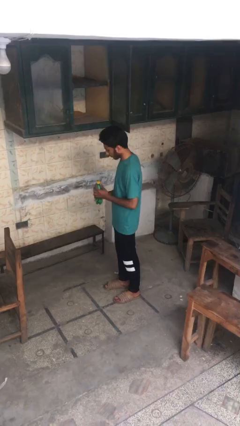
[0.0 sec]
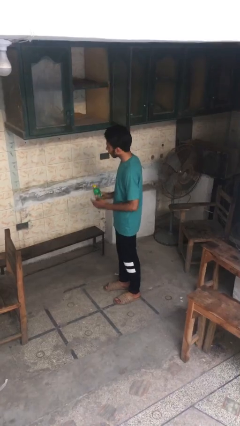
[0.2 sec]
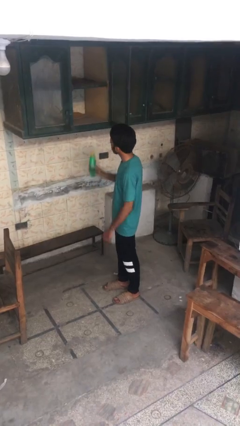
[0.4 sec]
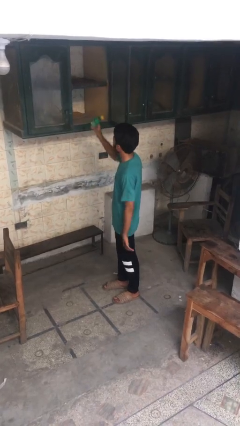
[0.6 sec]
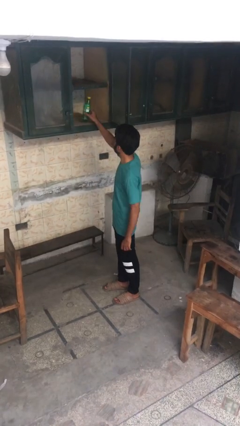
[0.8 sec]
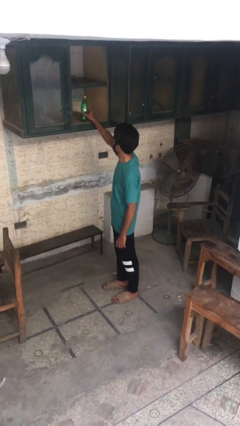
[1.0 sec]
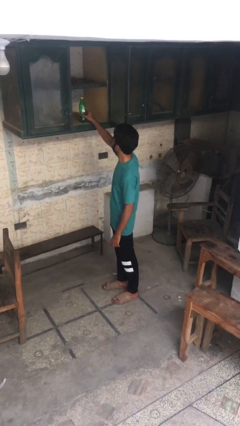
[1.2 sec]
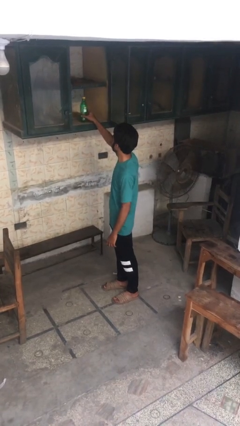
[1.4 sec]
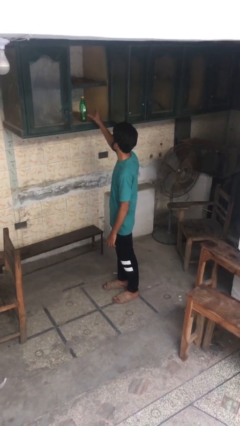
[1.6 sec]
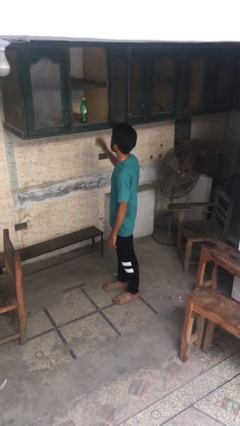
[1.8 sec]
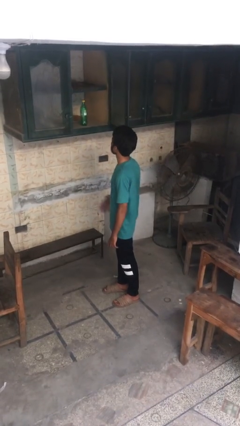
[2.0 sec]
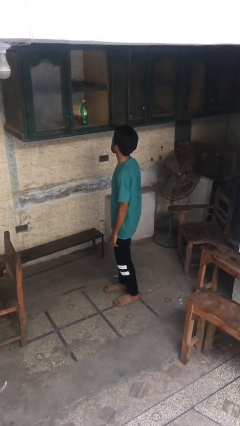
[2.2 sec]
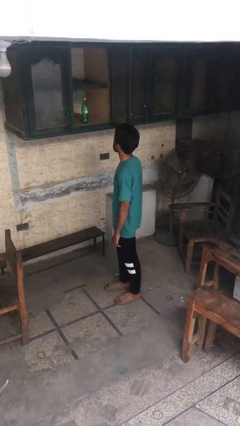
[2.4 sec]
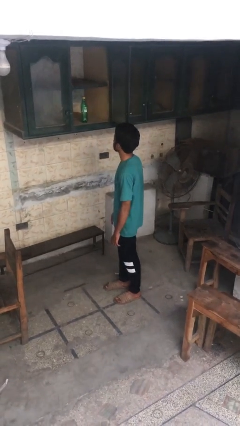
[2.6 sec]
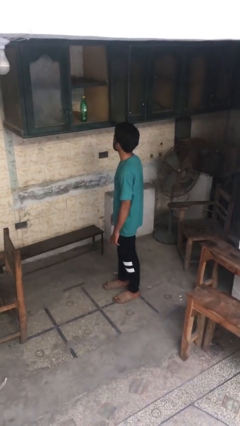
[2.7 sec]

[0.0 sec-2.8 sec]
person puts object in cabinet

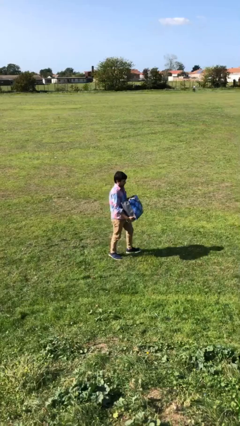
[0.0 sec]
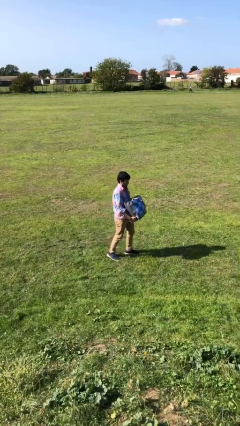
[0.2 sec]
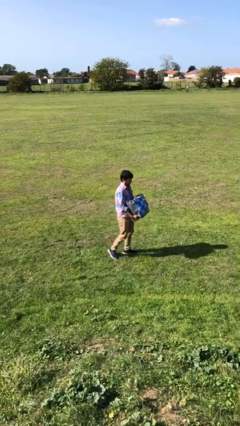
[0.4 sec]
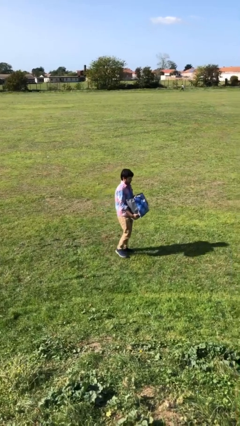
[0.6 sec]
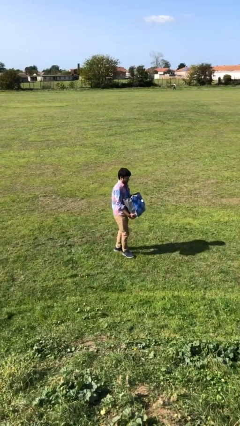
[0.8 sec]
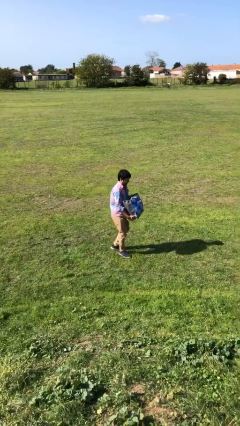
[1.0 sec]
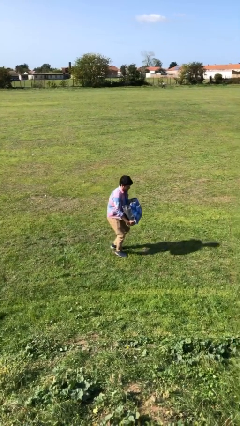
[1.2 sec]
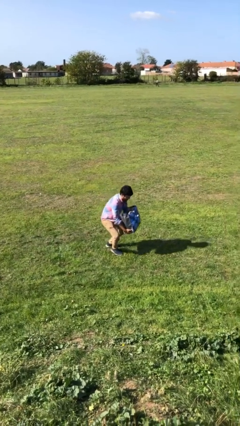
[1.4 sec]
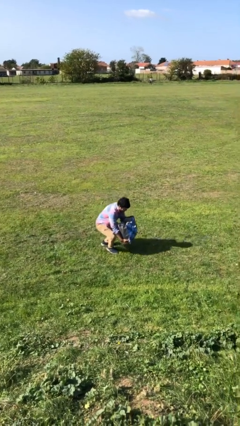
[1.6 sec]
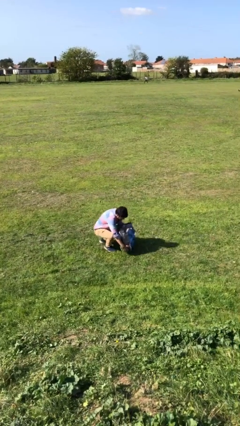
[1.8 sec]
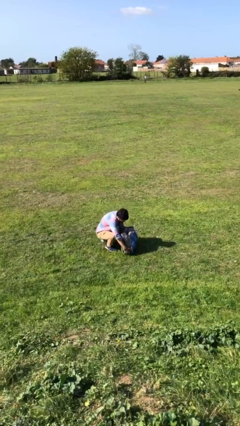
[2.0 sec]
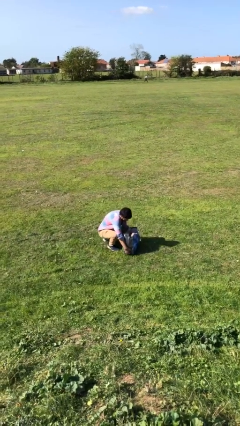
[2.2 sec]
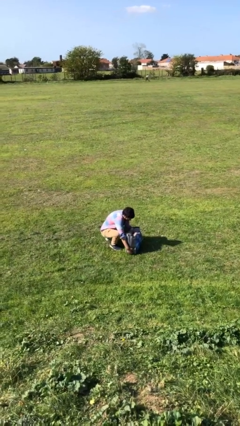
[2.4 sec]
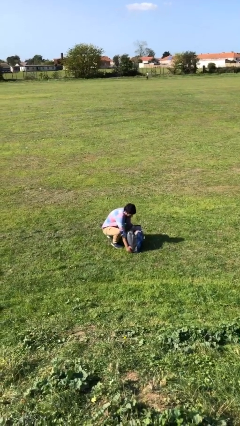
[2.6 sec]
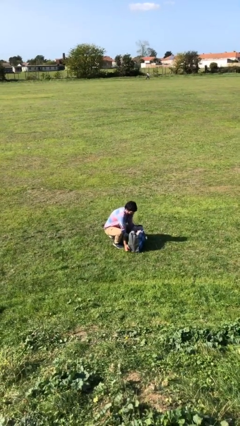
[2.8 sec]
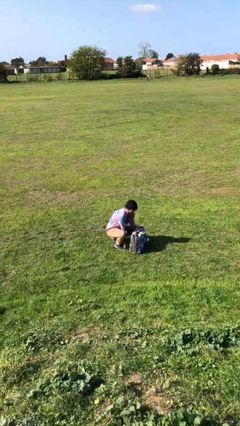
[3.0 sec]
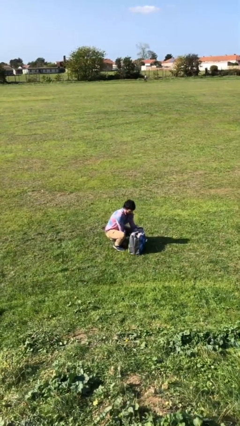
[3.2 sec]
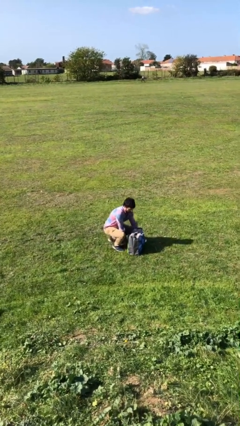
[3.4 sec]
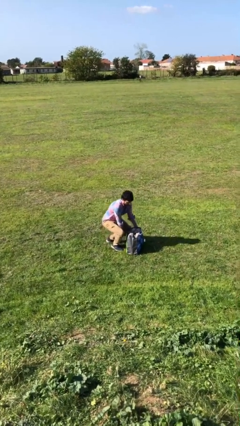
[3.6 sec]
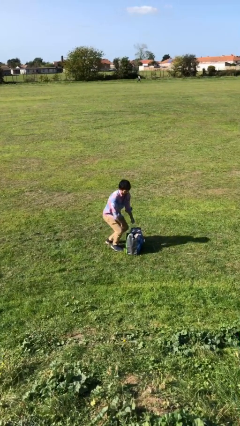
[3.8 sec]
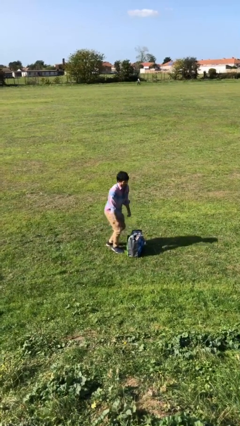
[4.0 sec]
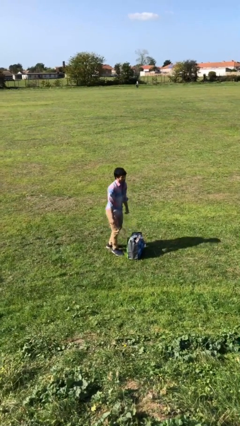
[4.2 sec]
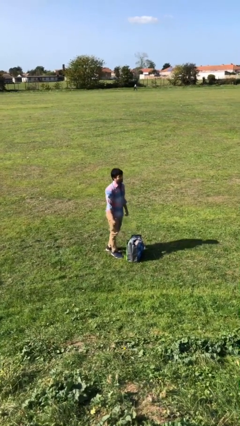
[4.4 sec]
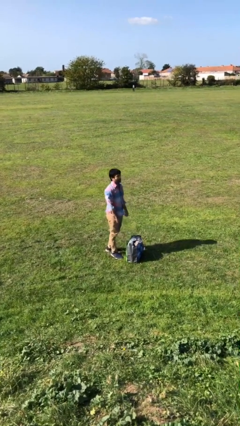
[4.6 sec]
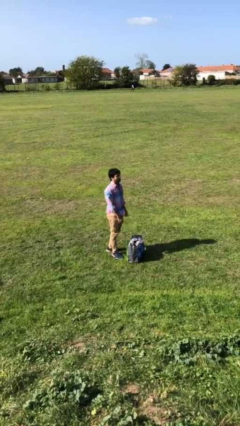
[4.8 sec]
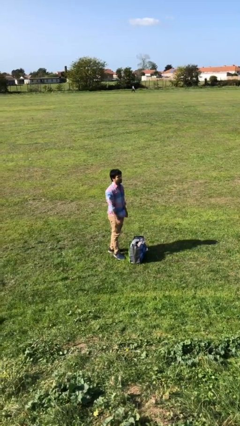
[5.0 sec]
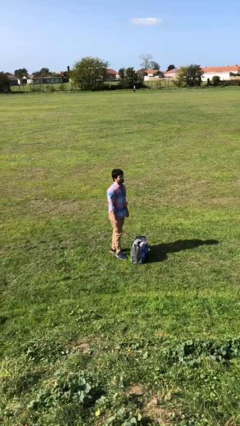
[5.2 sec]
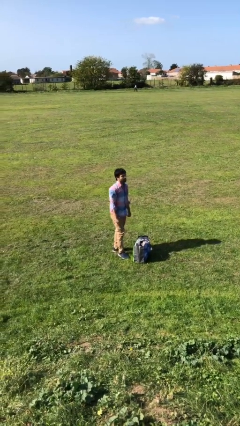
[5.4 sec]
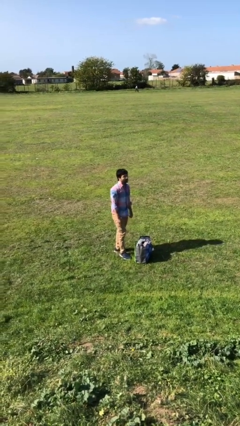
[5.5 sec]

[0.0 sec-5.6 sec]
person puts down object on floor

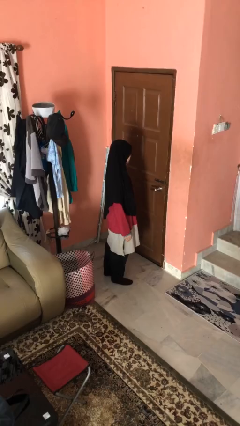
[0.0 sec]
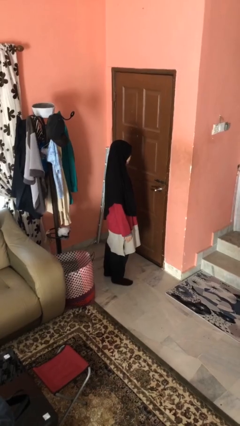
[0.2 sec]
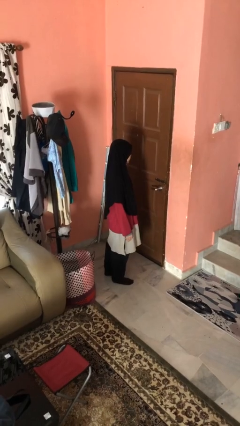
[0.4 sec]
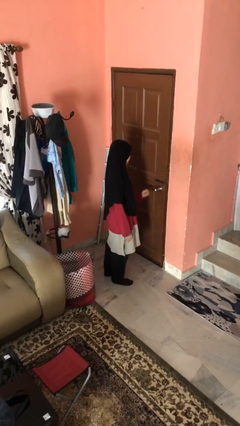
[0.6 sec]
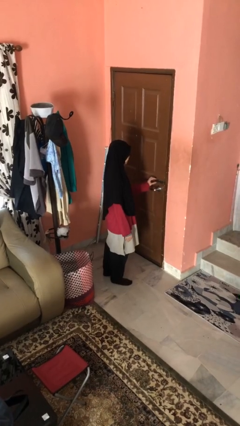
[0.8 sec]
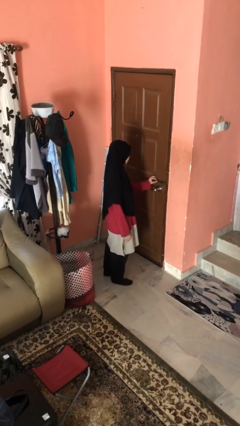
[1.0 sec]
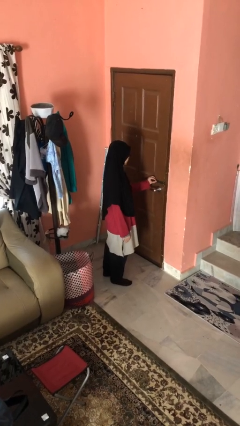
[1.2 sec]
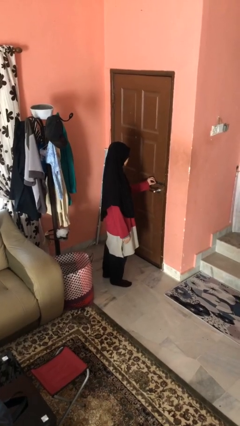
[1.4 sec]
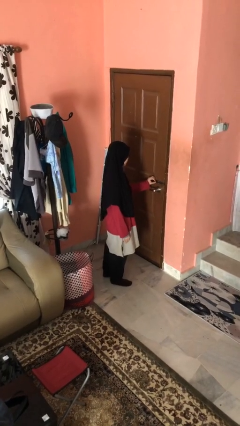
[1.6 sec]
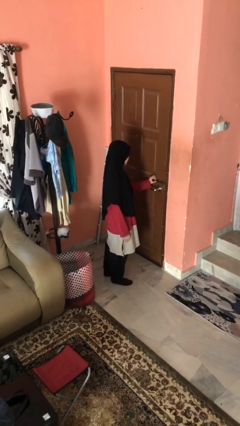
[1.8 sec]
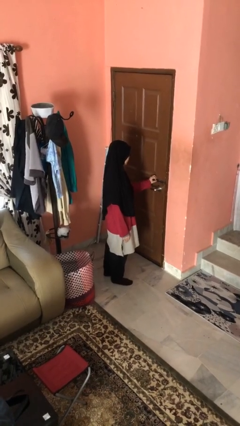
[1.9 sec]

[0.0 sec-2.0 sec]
person unlocks door with keys

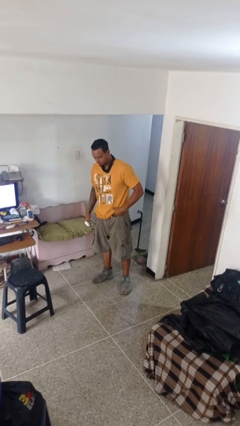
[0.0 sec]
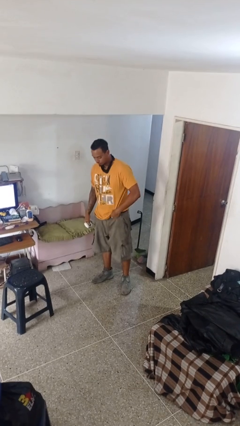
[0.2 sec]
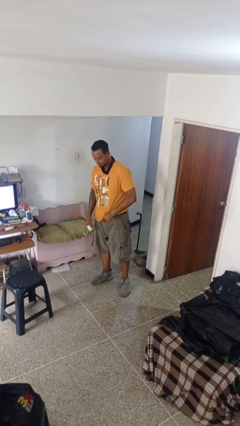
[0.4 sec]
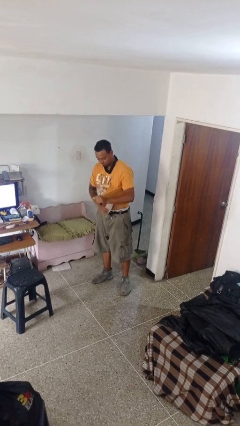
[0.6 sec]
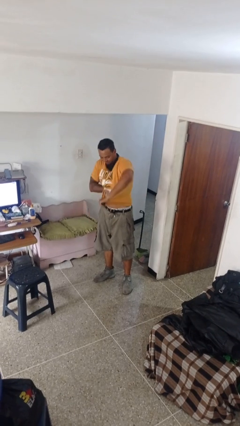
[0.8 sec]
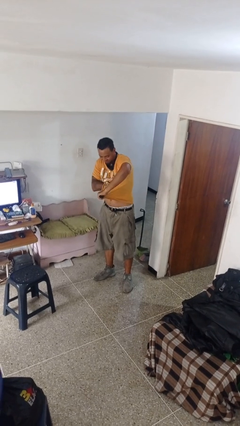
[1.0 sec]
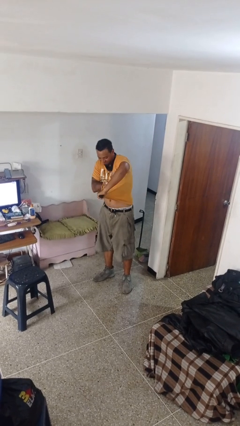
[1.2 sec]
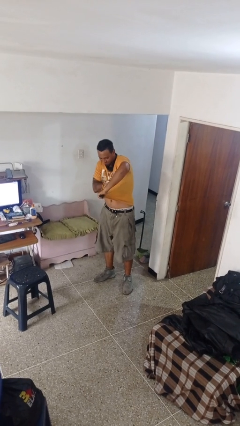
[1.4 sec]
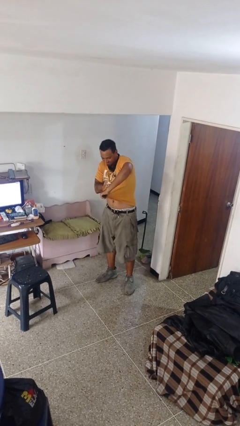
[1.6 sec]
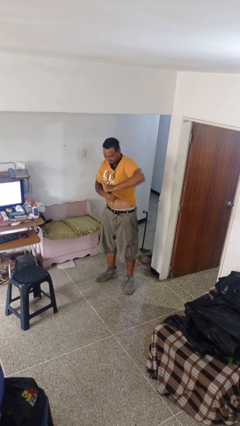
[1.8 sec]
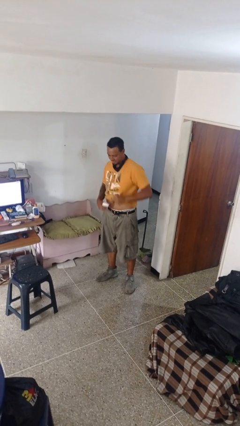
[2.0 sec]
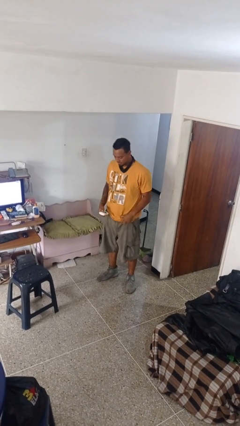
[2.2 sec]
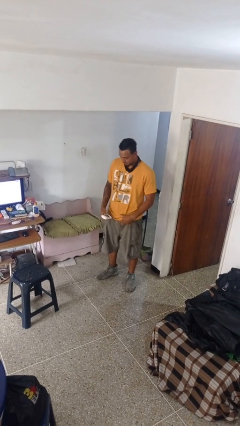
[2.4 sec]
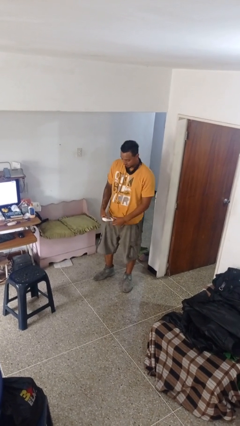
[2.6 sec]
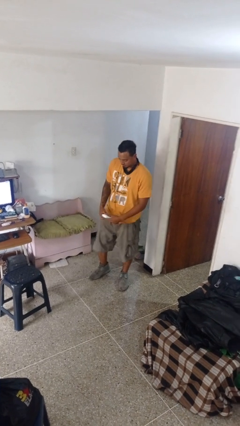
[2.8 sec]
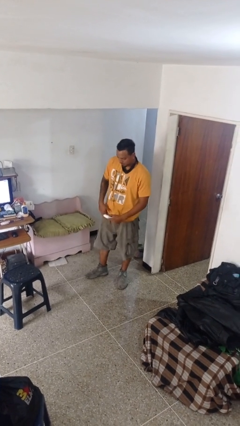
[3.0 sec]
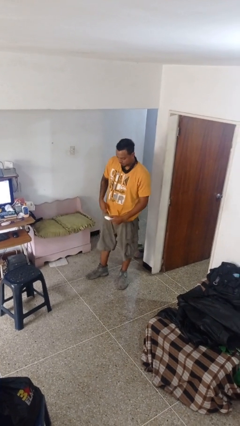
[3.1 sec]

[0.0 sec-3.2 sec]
person applies deodorant

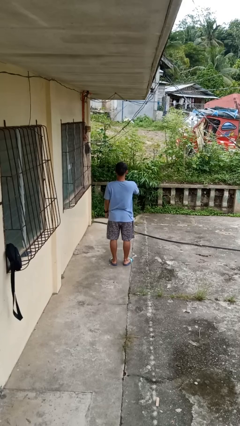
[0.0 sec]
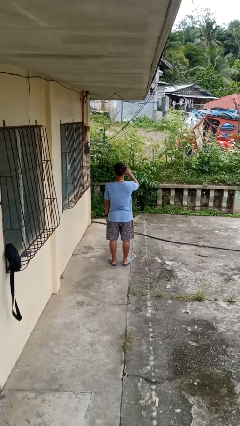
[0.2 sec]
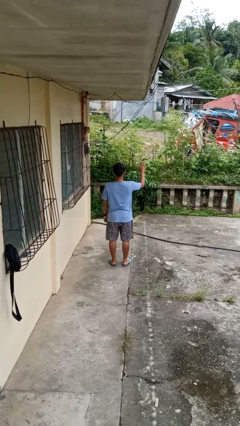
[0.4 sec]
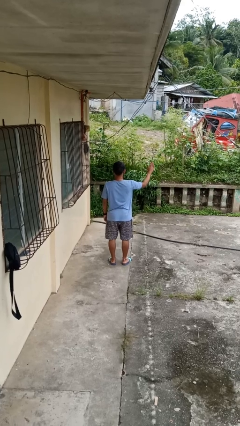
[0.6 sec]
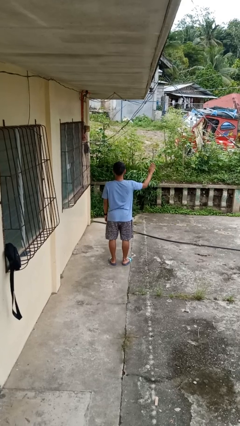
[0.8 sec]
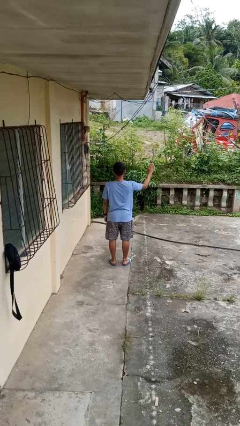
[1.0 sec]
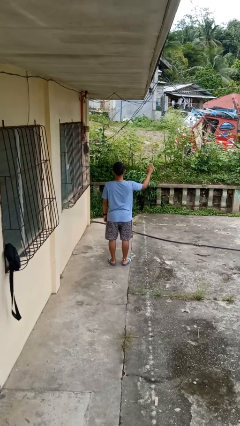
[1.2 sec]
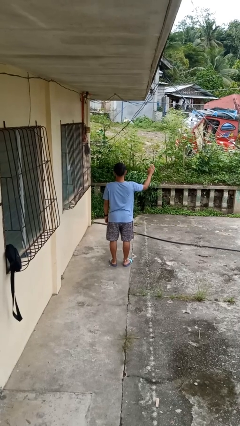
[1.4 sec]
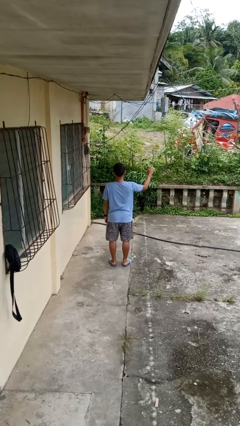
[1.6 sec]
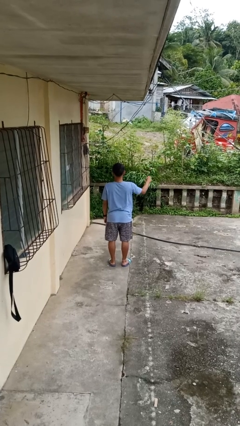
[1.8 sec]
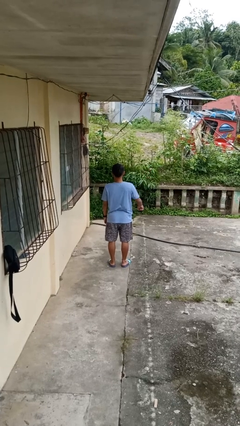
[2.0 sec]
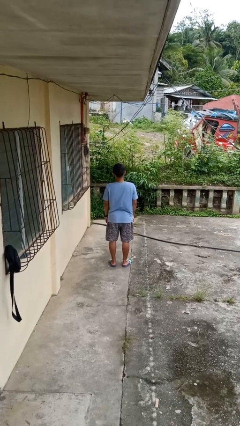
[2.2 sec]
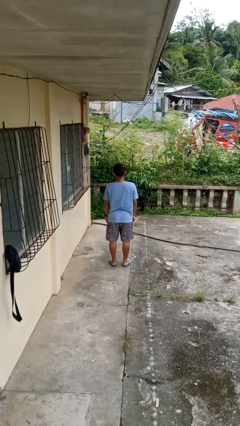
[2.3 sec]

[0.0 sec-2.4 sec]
person gestures swipe right

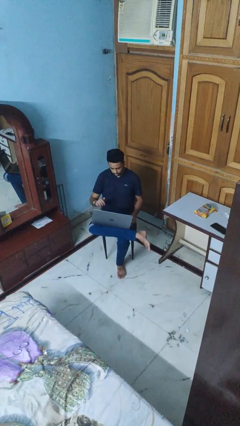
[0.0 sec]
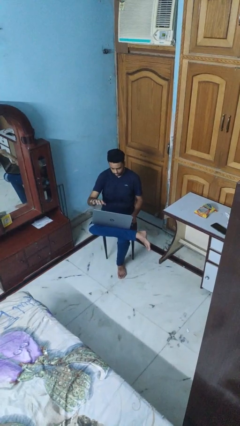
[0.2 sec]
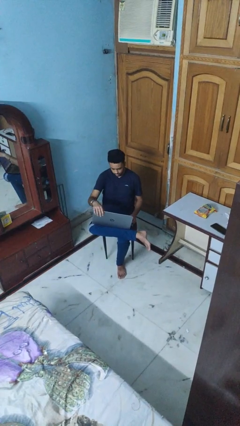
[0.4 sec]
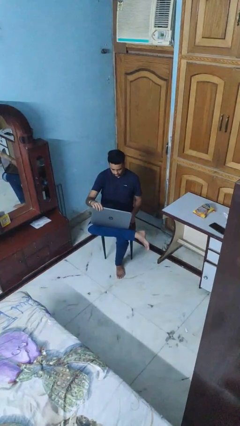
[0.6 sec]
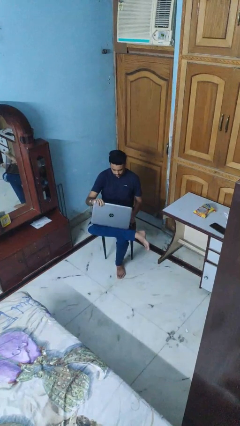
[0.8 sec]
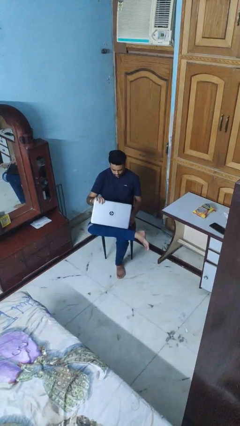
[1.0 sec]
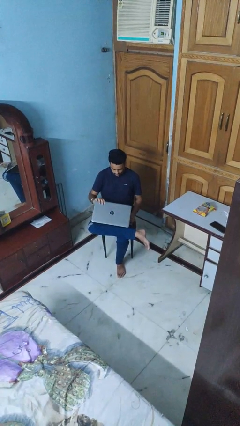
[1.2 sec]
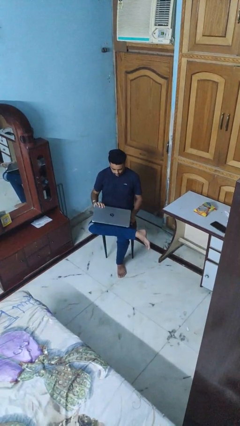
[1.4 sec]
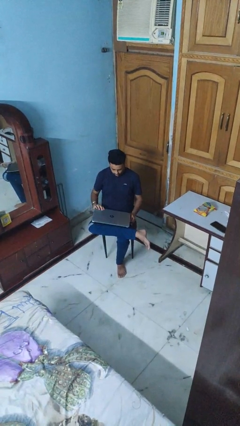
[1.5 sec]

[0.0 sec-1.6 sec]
person closes laptop
